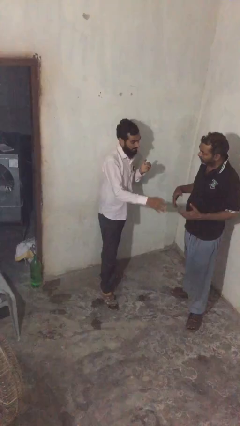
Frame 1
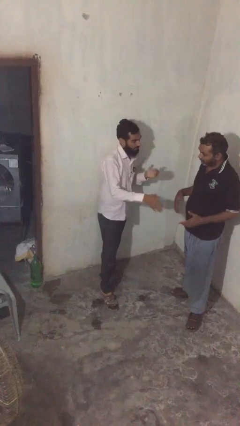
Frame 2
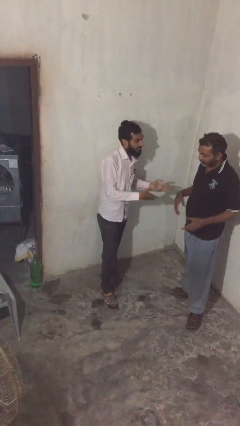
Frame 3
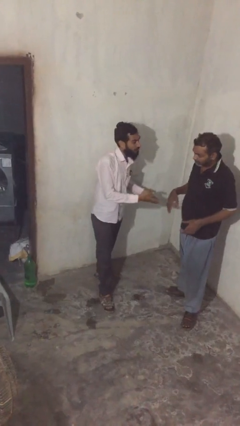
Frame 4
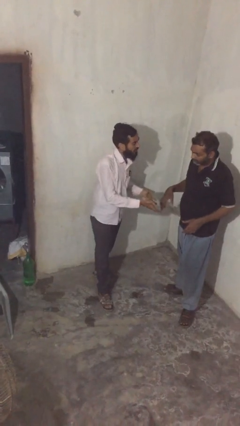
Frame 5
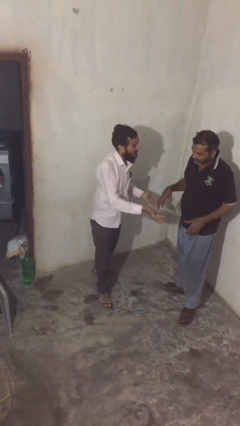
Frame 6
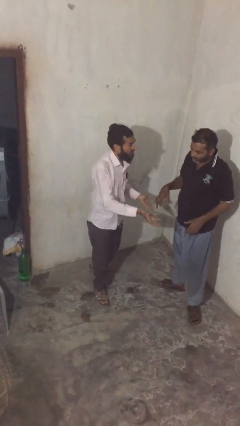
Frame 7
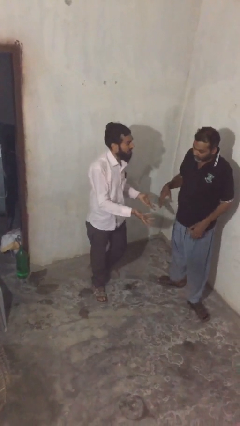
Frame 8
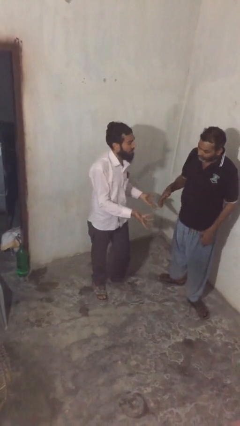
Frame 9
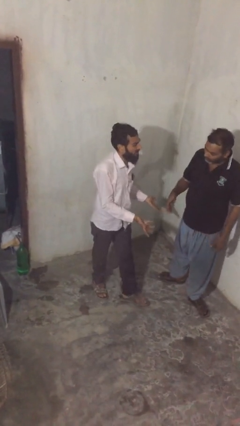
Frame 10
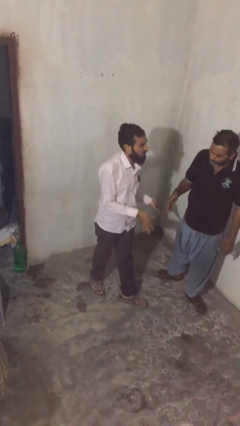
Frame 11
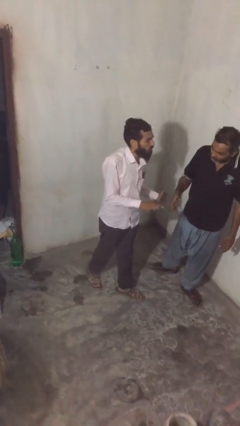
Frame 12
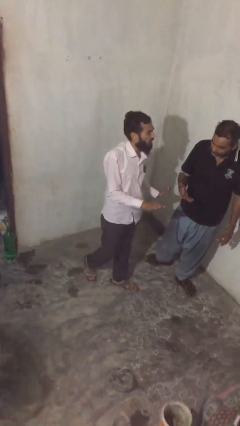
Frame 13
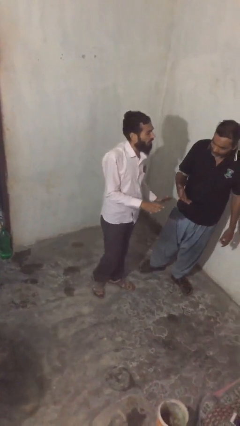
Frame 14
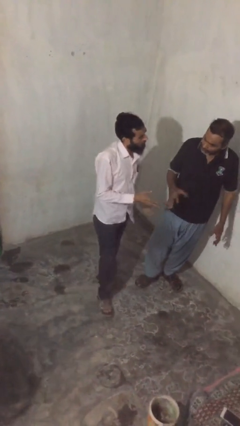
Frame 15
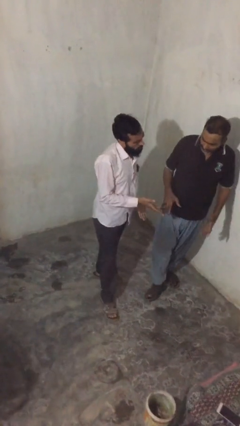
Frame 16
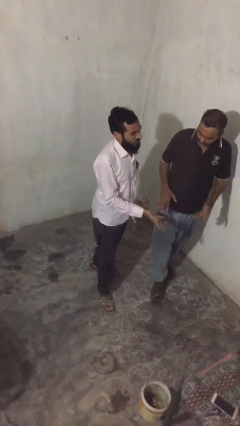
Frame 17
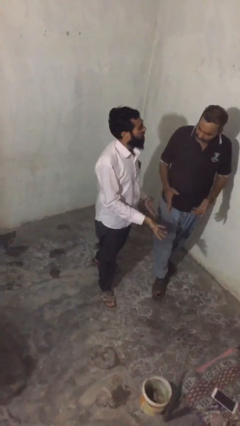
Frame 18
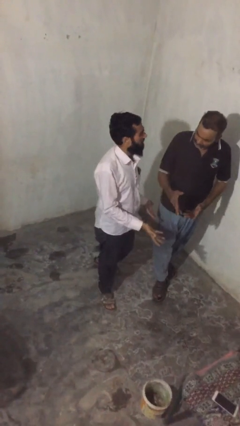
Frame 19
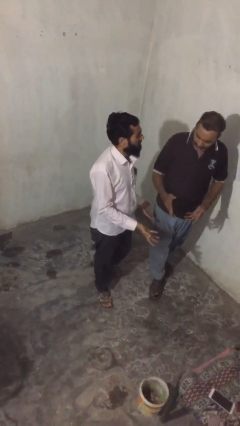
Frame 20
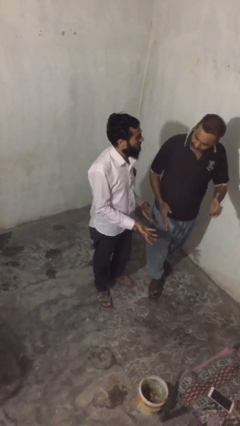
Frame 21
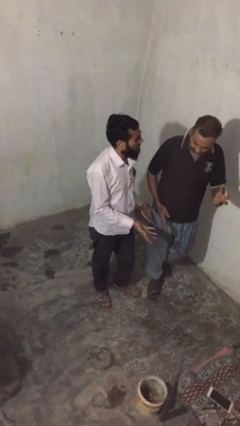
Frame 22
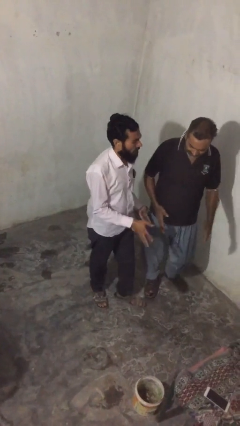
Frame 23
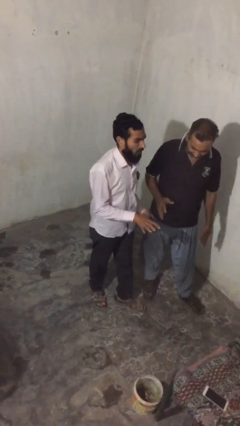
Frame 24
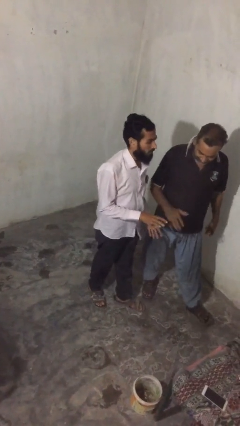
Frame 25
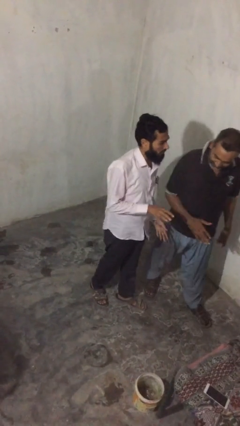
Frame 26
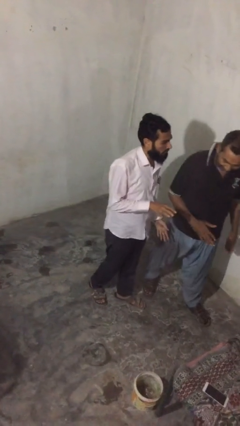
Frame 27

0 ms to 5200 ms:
person talks to person

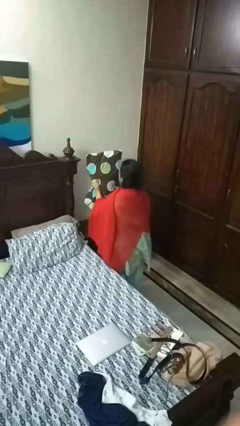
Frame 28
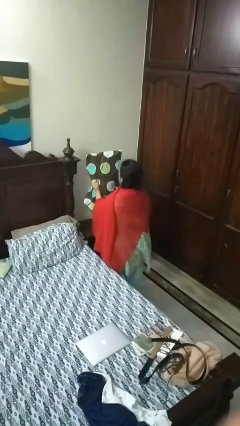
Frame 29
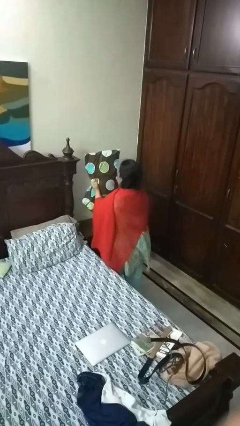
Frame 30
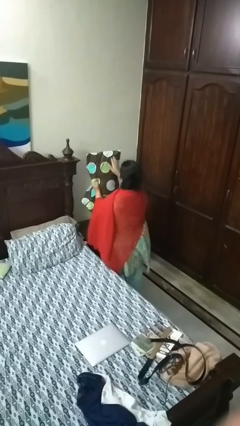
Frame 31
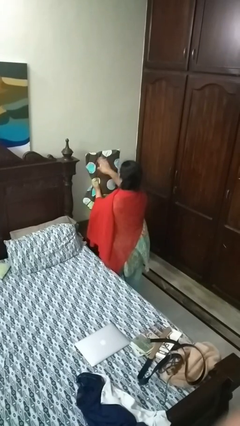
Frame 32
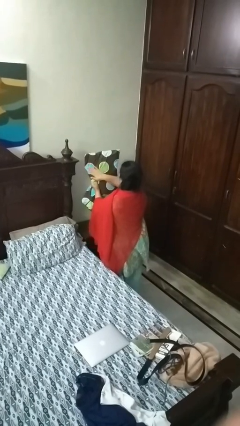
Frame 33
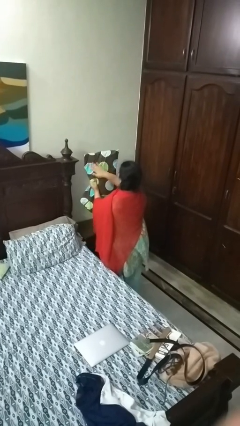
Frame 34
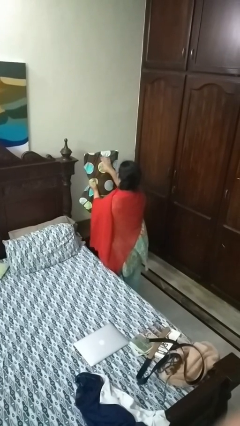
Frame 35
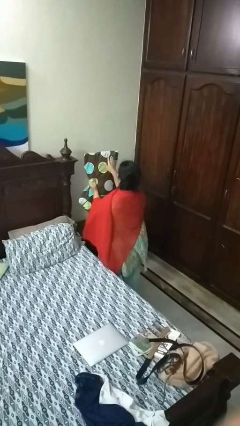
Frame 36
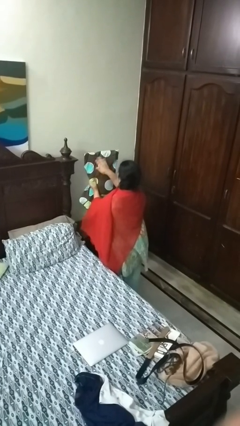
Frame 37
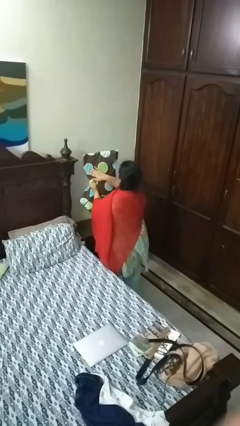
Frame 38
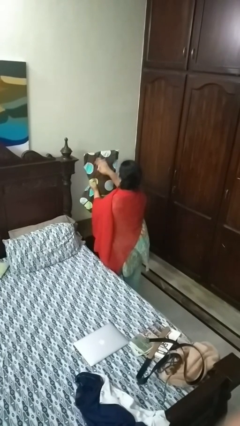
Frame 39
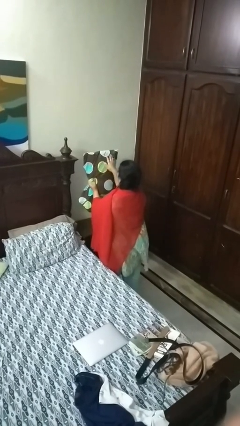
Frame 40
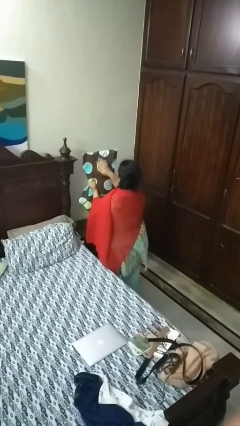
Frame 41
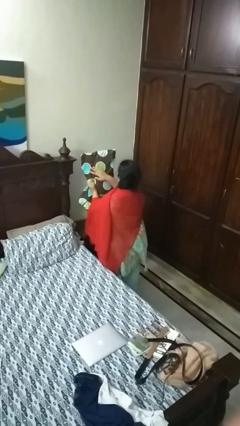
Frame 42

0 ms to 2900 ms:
person waves hand over object

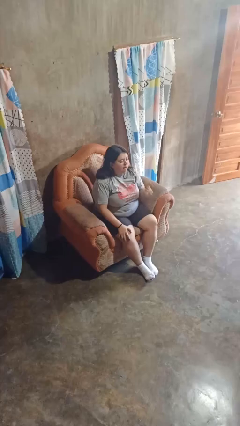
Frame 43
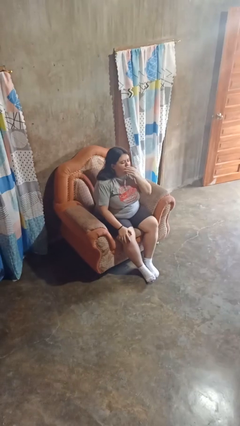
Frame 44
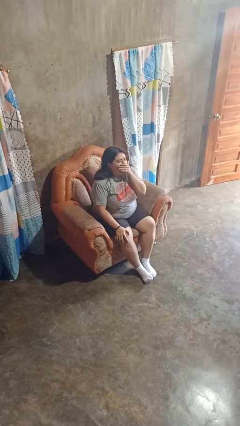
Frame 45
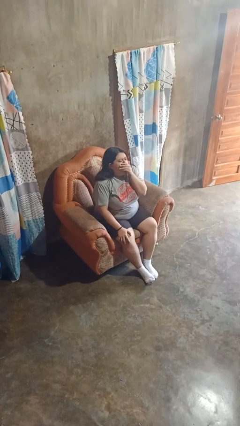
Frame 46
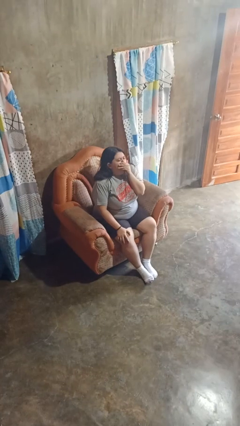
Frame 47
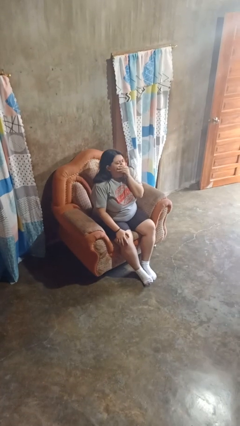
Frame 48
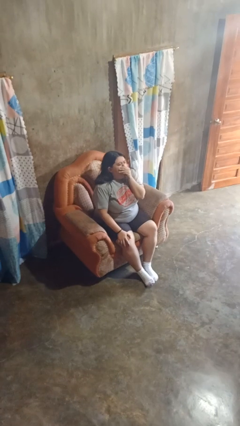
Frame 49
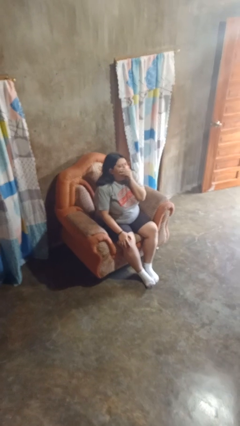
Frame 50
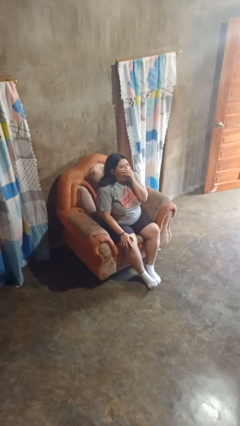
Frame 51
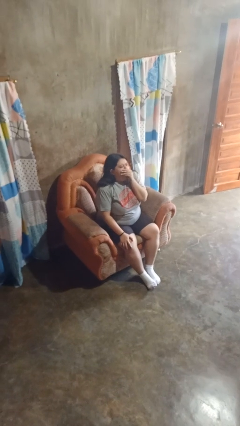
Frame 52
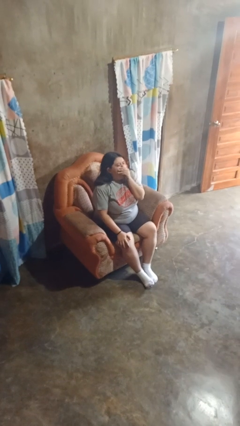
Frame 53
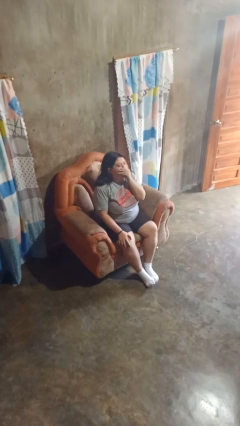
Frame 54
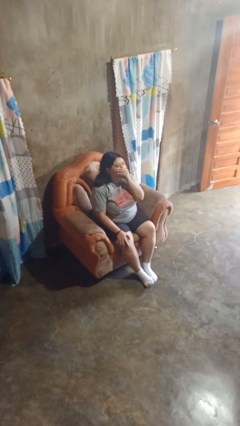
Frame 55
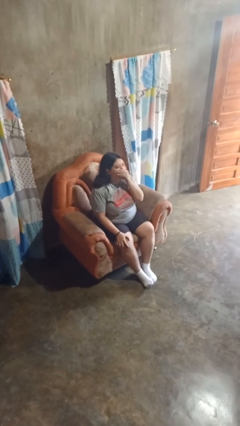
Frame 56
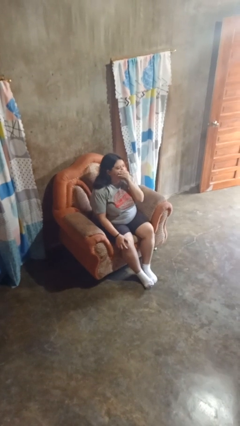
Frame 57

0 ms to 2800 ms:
person yawns

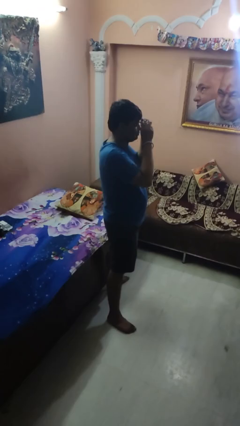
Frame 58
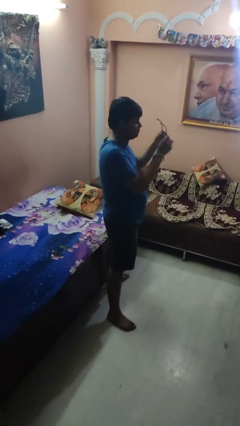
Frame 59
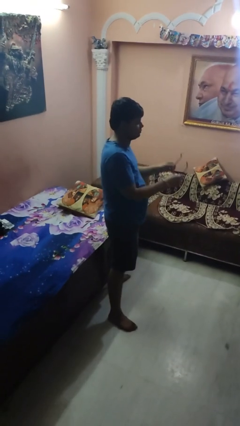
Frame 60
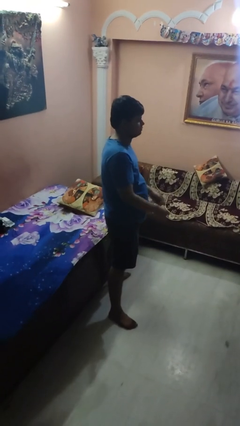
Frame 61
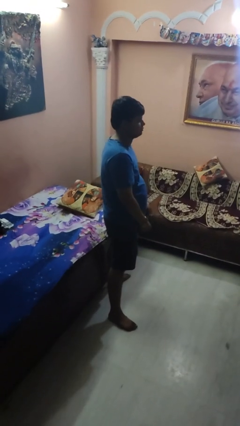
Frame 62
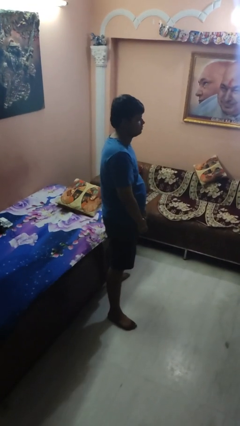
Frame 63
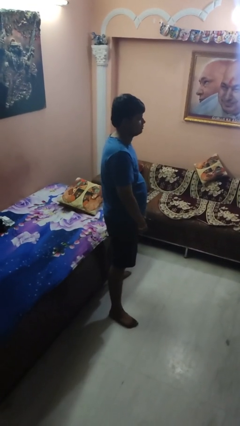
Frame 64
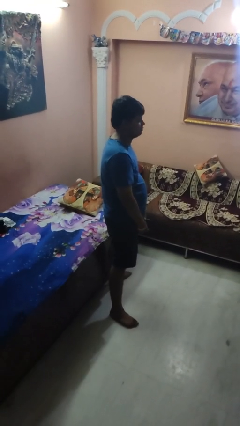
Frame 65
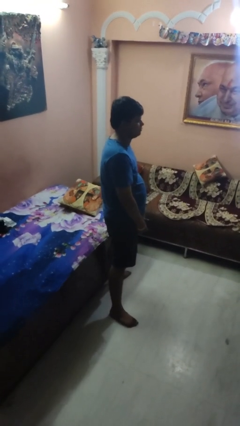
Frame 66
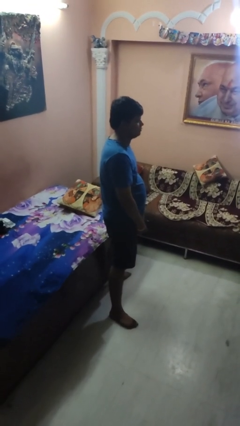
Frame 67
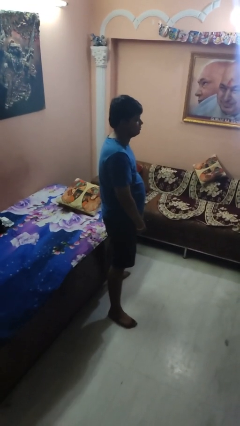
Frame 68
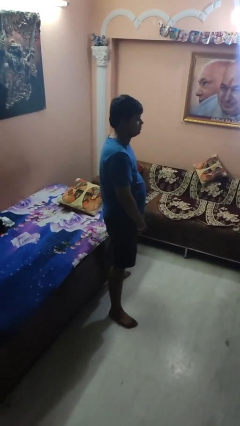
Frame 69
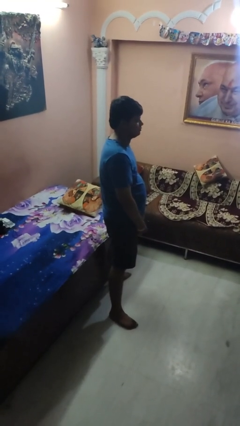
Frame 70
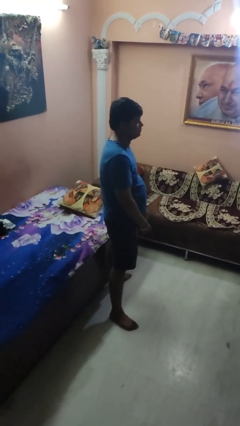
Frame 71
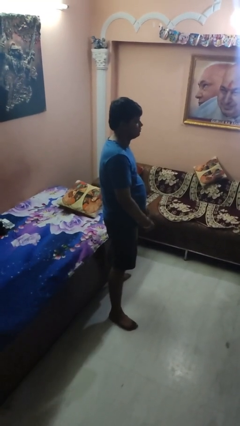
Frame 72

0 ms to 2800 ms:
person takes off glasses

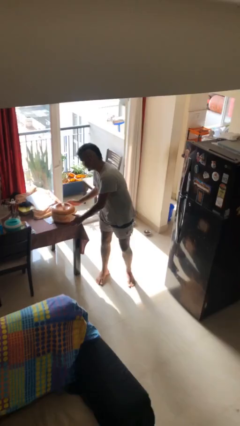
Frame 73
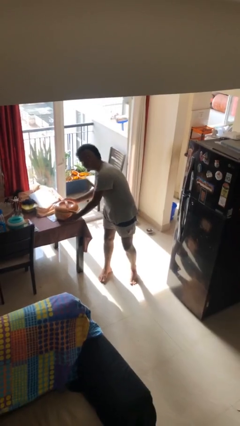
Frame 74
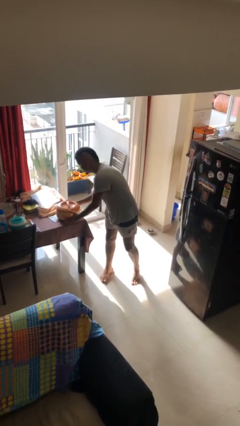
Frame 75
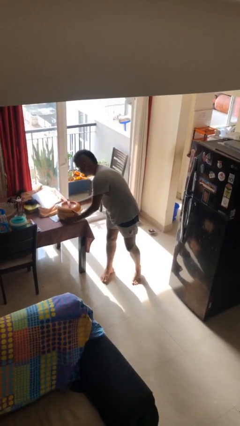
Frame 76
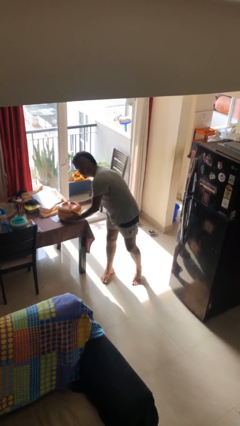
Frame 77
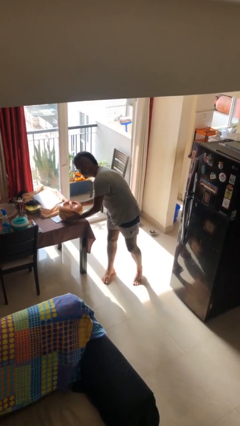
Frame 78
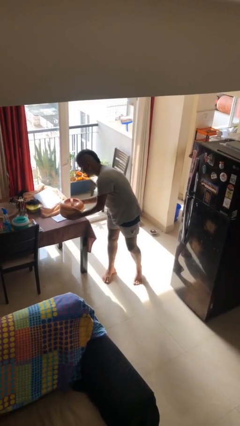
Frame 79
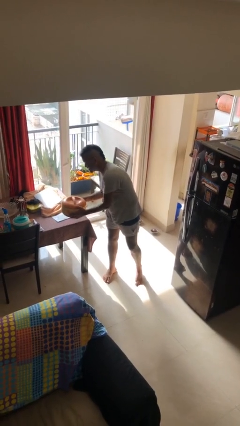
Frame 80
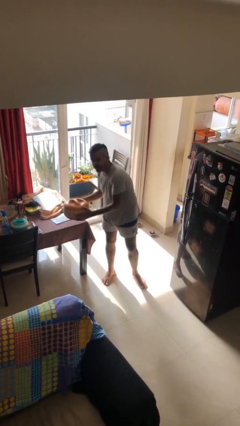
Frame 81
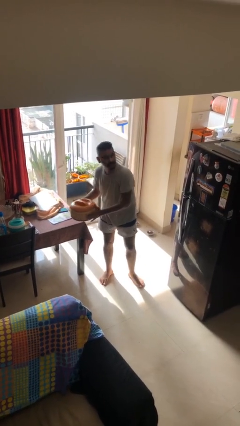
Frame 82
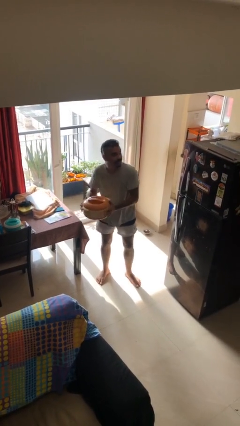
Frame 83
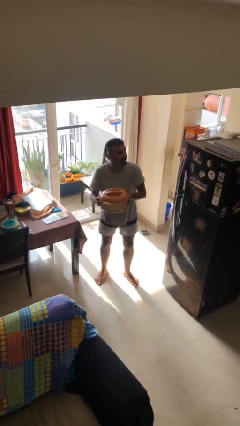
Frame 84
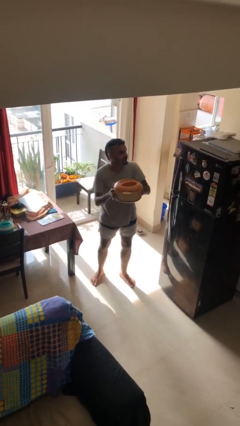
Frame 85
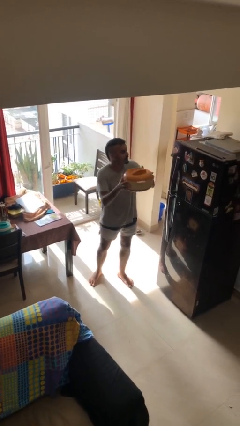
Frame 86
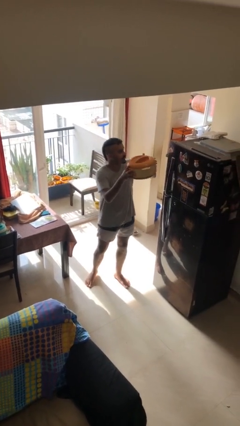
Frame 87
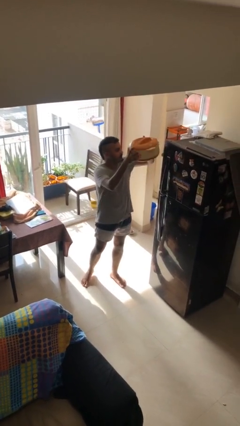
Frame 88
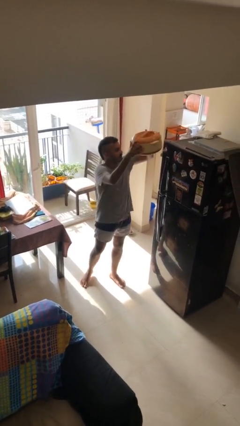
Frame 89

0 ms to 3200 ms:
person picks up object from table

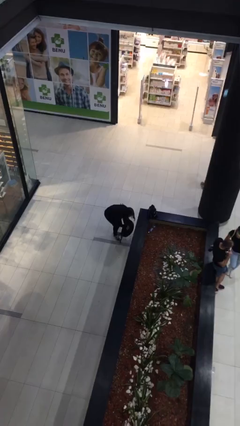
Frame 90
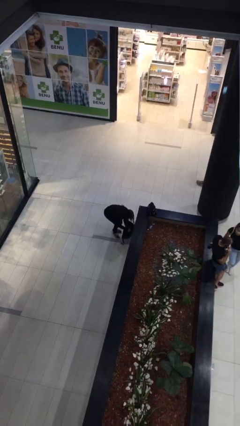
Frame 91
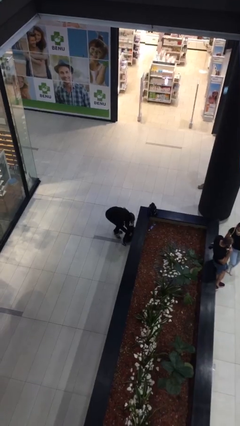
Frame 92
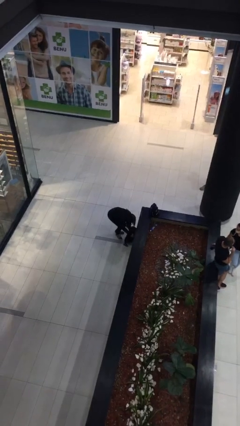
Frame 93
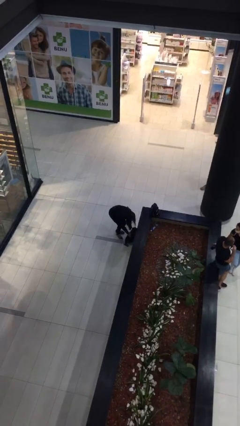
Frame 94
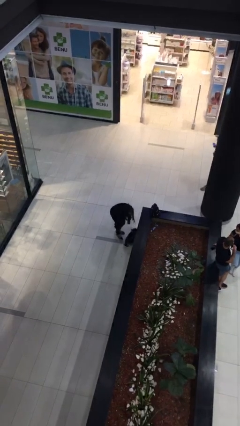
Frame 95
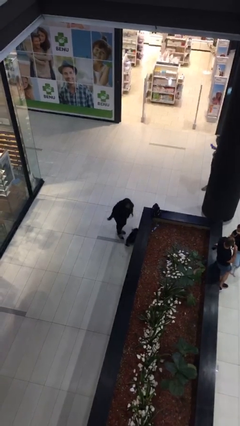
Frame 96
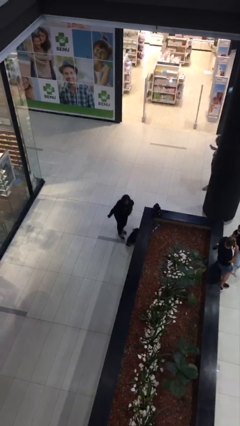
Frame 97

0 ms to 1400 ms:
person puts down object on floor
